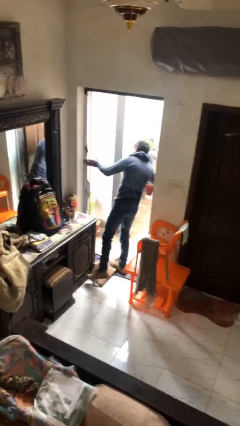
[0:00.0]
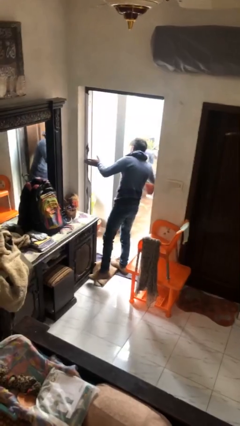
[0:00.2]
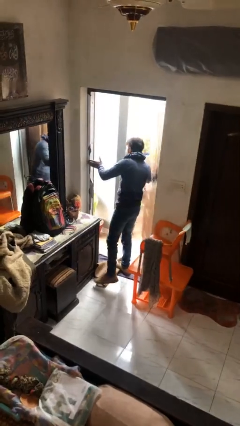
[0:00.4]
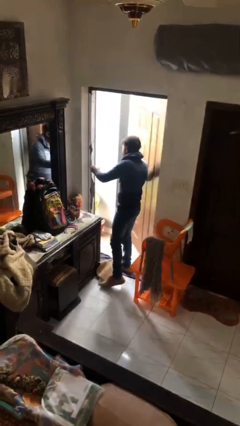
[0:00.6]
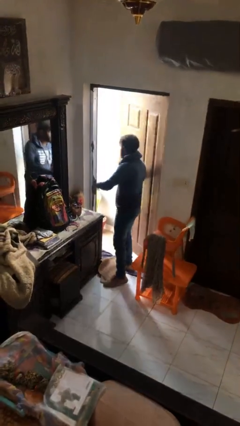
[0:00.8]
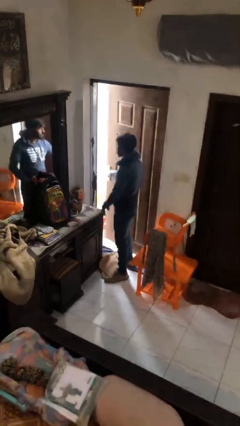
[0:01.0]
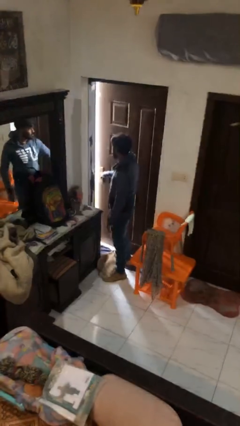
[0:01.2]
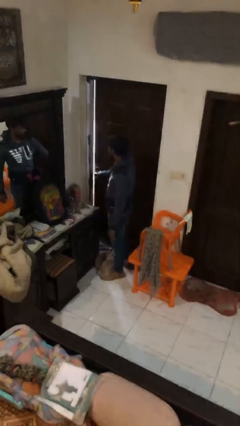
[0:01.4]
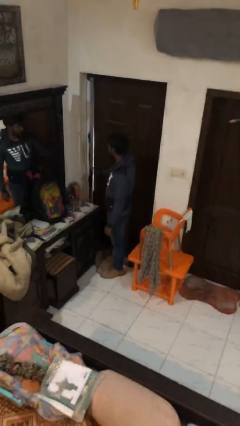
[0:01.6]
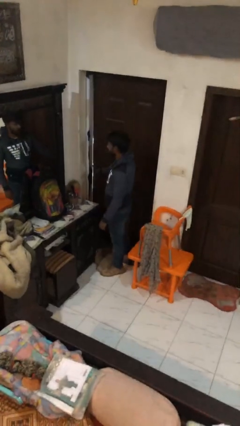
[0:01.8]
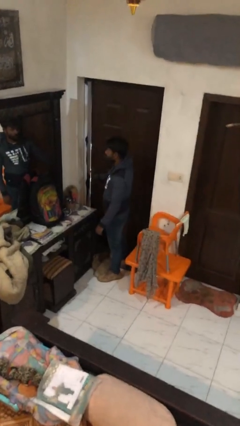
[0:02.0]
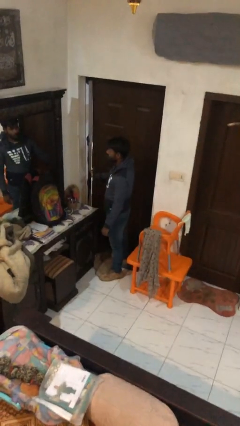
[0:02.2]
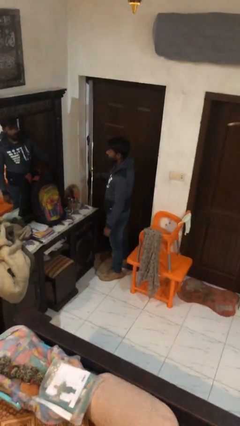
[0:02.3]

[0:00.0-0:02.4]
person closes facility door

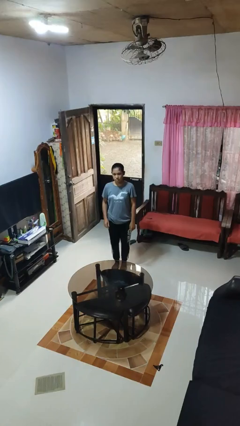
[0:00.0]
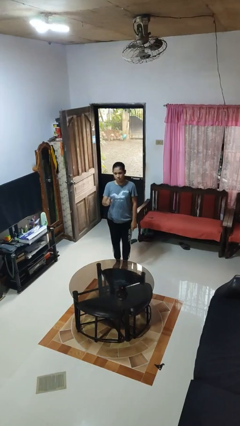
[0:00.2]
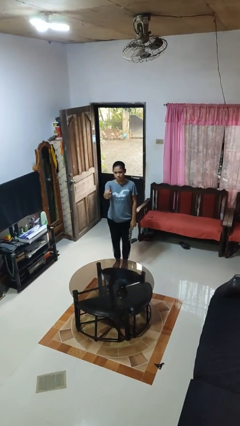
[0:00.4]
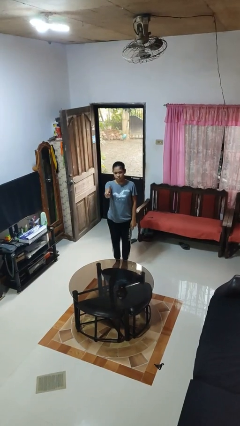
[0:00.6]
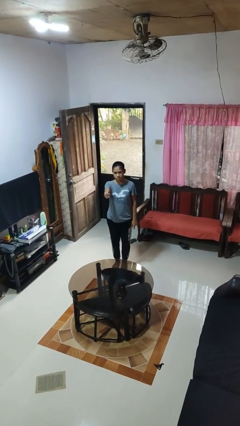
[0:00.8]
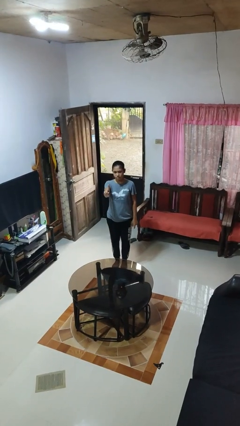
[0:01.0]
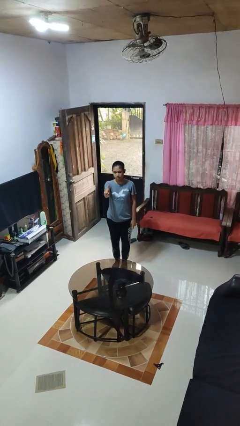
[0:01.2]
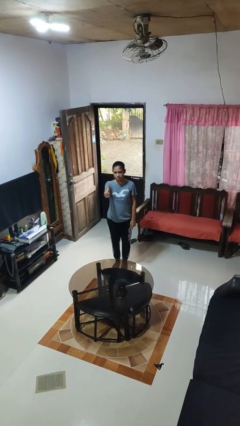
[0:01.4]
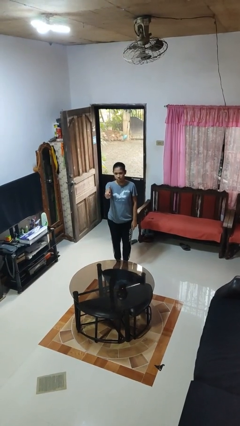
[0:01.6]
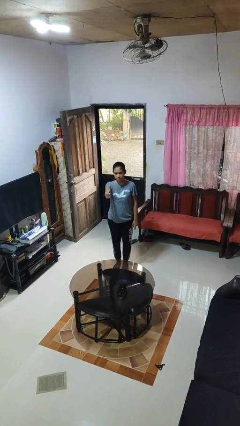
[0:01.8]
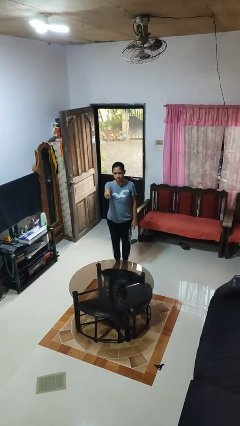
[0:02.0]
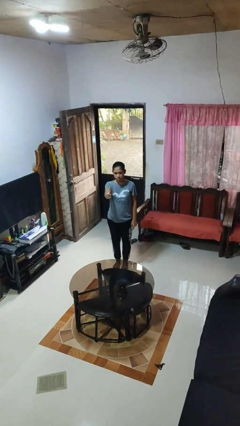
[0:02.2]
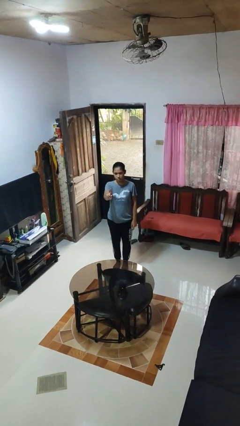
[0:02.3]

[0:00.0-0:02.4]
person gestures number one

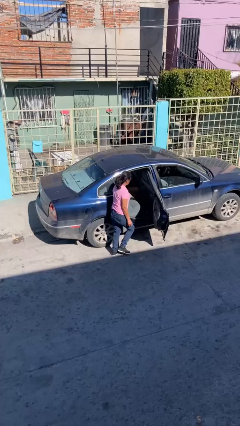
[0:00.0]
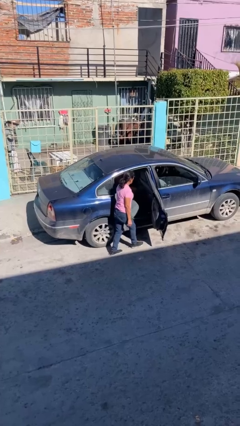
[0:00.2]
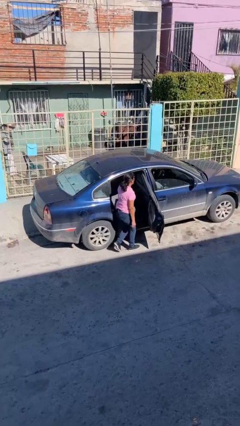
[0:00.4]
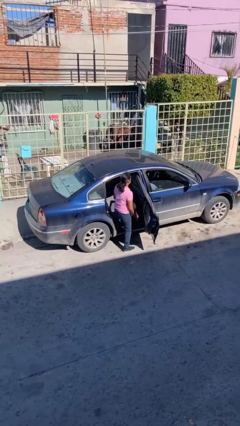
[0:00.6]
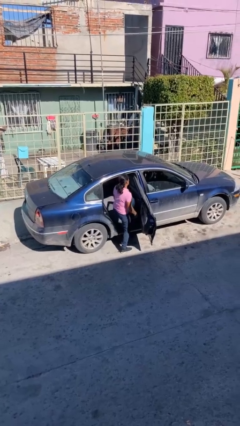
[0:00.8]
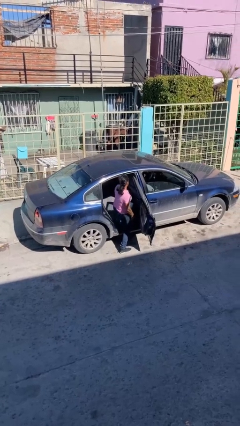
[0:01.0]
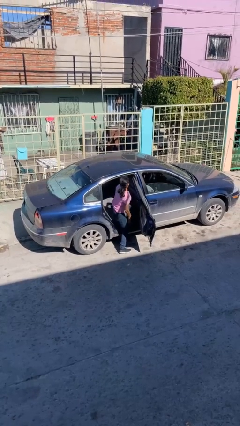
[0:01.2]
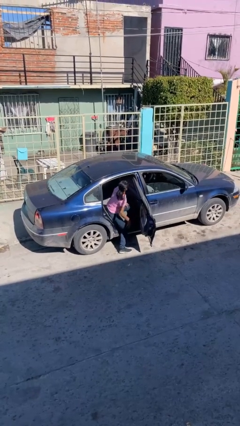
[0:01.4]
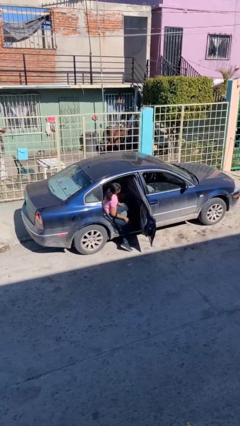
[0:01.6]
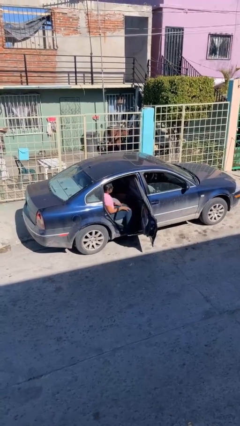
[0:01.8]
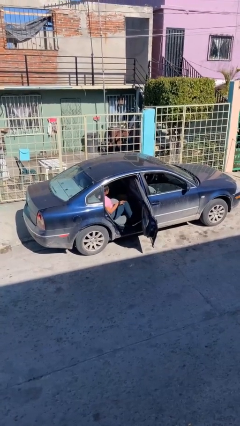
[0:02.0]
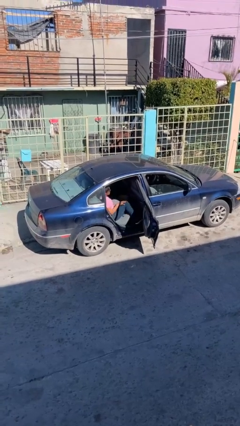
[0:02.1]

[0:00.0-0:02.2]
person enters car

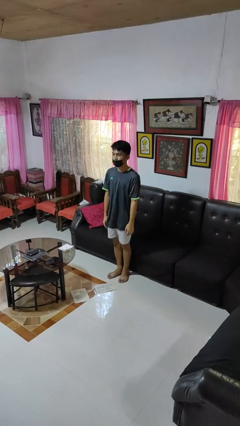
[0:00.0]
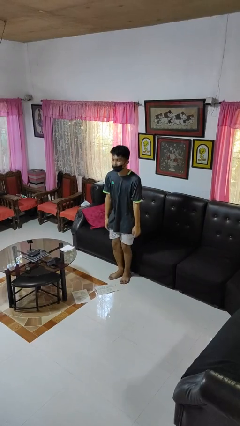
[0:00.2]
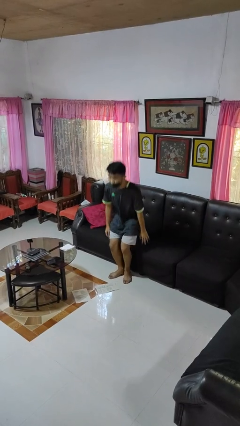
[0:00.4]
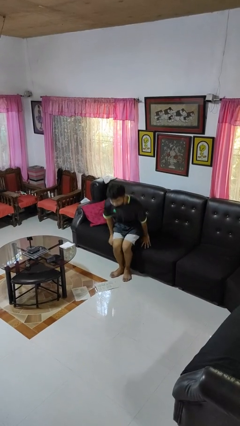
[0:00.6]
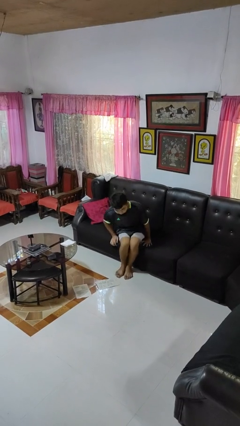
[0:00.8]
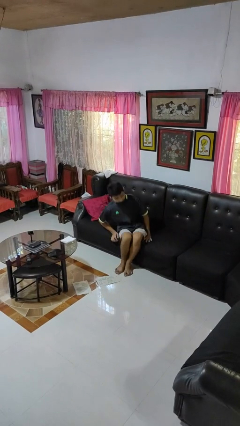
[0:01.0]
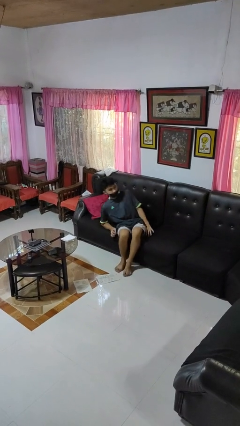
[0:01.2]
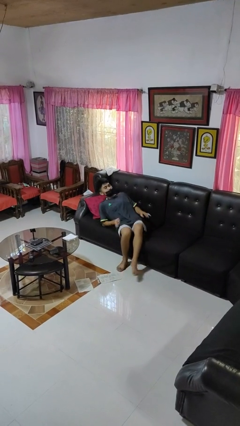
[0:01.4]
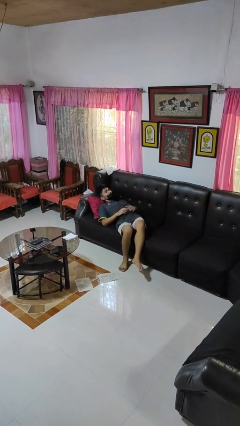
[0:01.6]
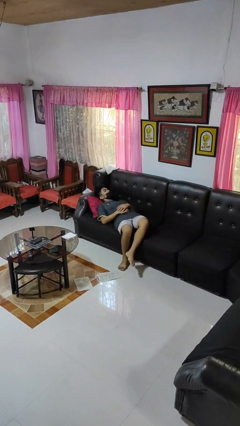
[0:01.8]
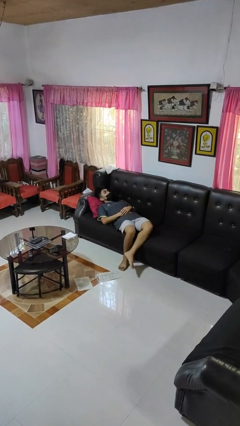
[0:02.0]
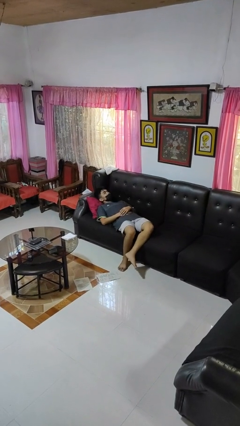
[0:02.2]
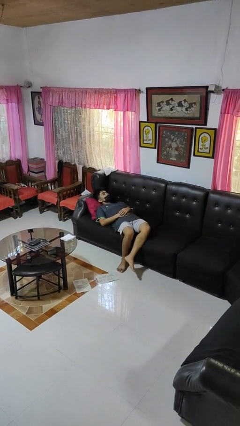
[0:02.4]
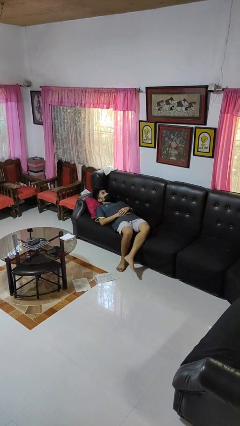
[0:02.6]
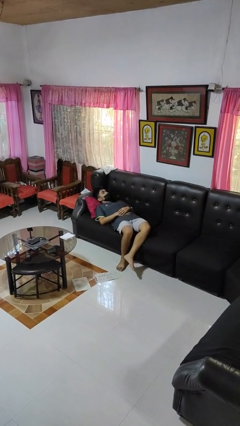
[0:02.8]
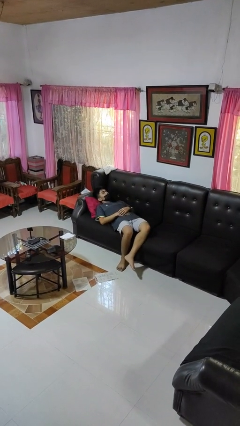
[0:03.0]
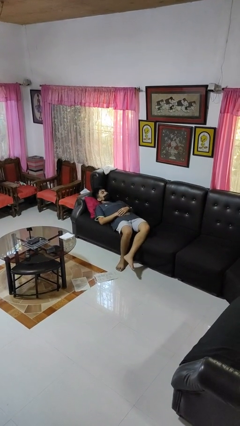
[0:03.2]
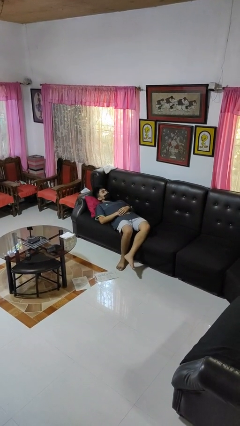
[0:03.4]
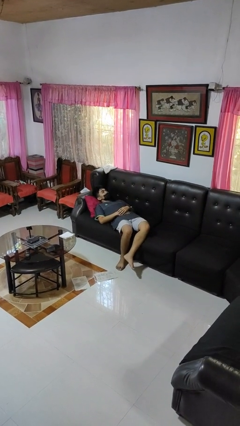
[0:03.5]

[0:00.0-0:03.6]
person lies down on couch

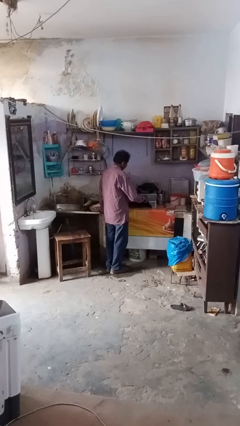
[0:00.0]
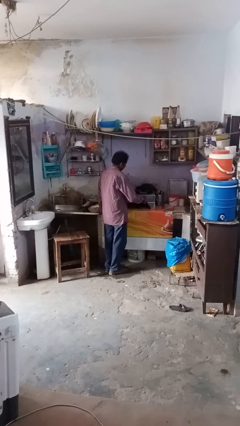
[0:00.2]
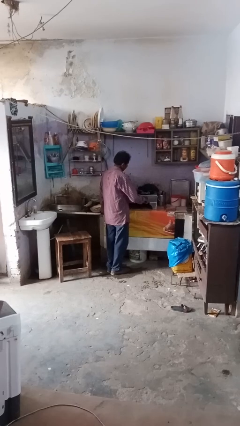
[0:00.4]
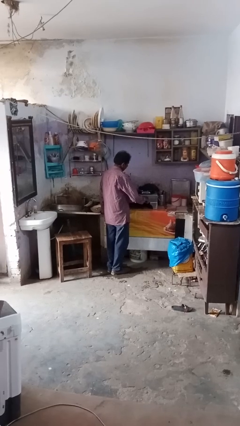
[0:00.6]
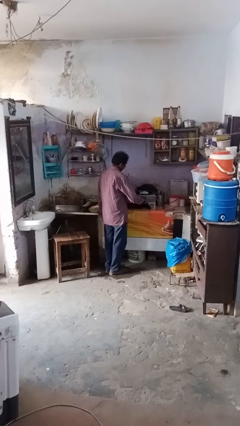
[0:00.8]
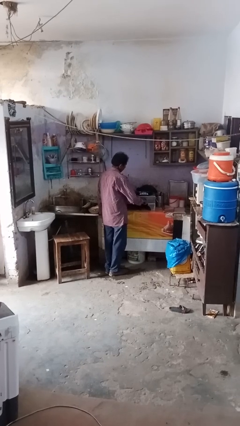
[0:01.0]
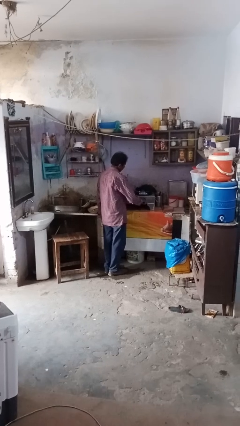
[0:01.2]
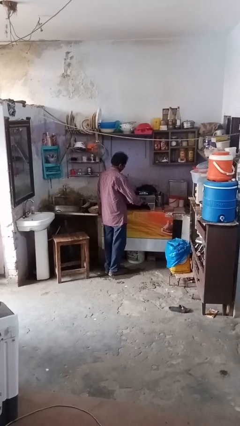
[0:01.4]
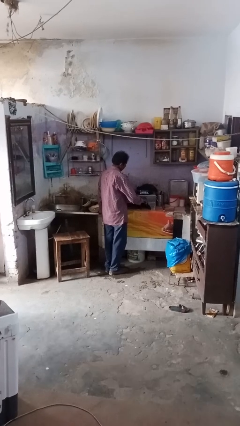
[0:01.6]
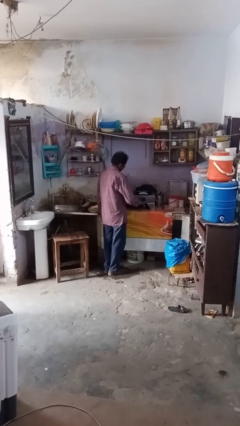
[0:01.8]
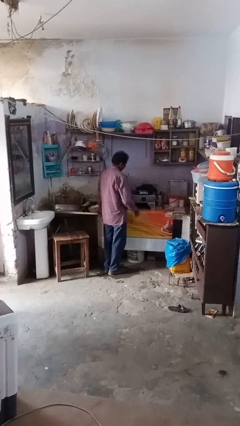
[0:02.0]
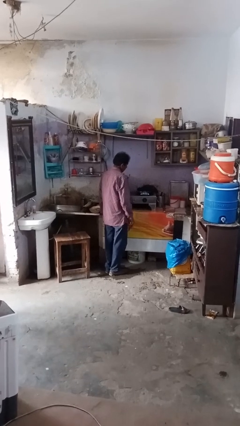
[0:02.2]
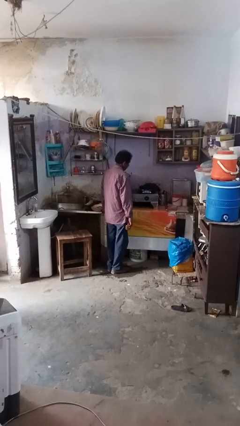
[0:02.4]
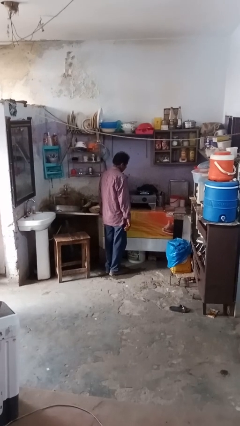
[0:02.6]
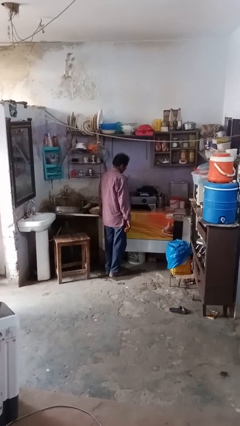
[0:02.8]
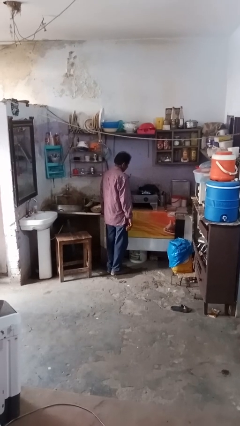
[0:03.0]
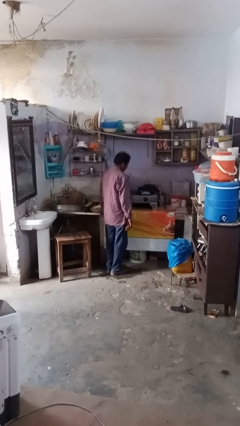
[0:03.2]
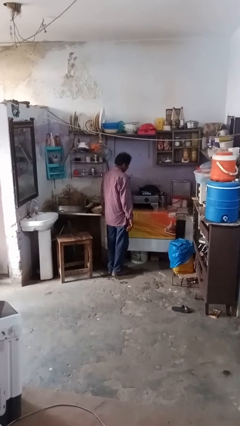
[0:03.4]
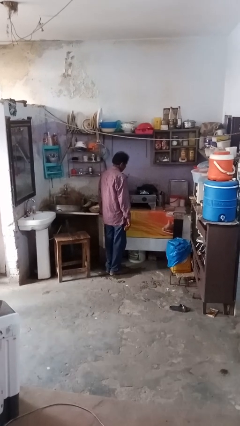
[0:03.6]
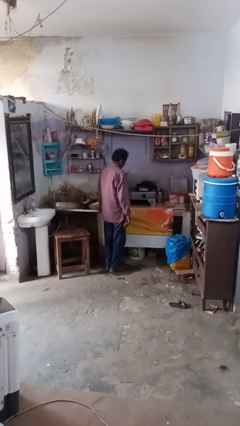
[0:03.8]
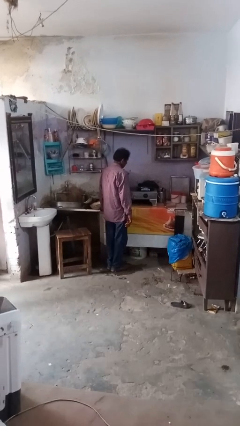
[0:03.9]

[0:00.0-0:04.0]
person turns on stovetop

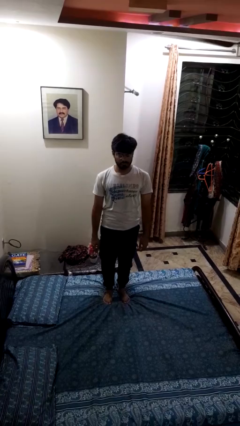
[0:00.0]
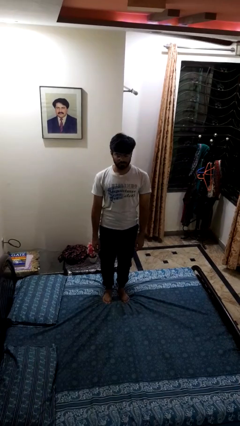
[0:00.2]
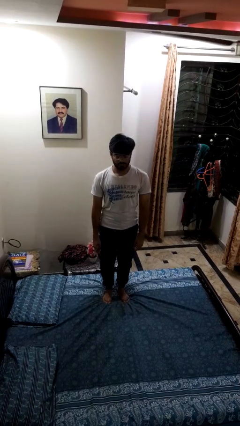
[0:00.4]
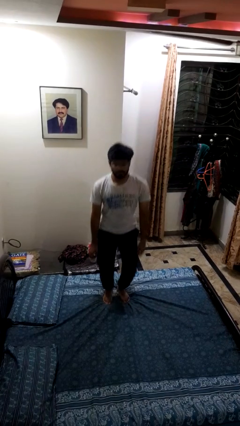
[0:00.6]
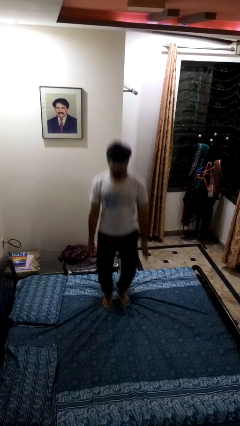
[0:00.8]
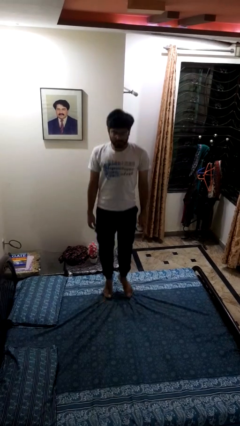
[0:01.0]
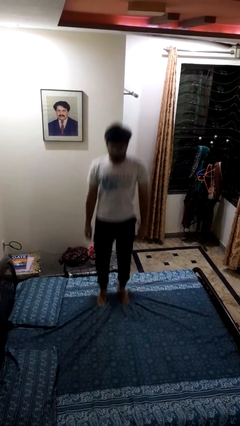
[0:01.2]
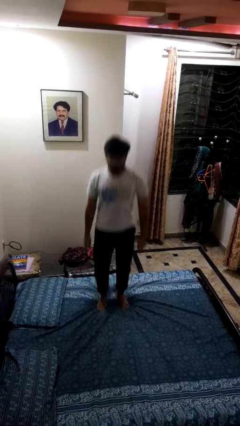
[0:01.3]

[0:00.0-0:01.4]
person jumps on bed

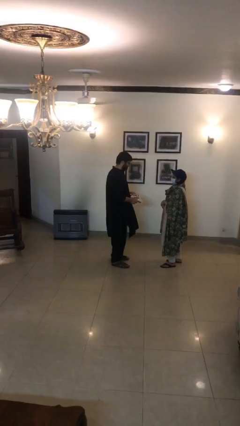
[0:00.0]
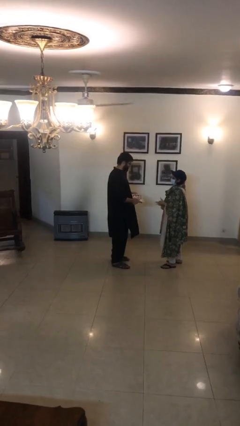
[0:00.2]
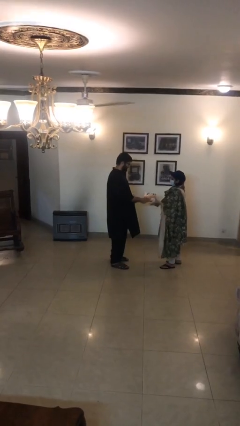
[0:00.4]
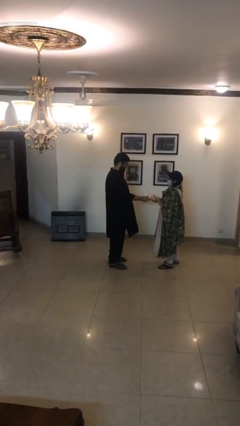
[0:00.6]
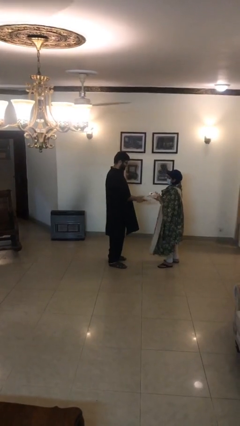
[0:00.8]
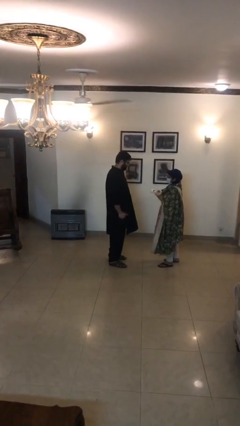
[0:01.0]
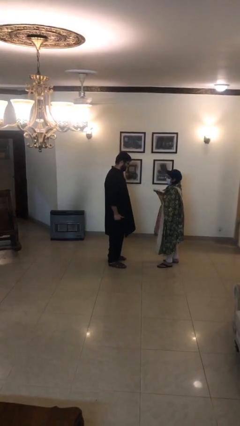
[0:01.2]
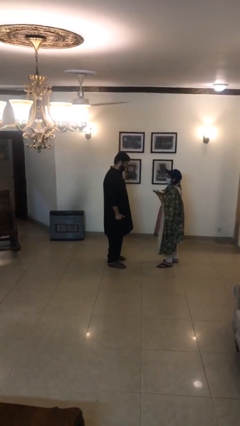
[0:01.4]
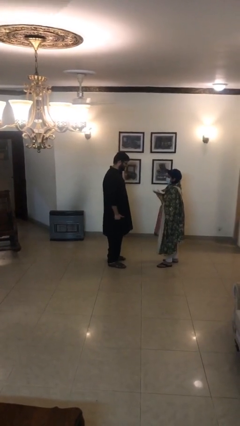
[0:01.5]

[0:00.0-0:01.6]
person transfers object to person
